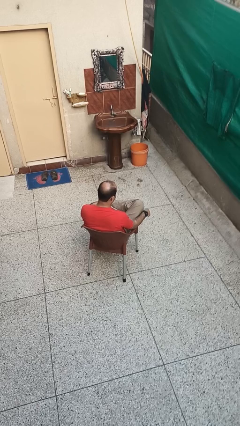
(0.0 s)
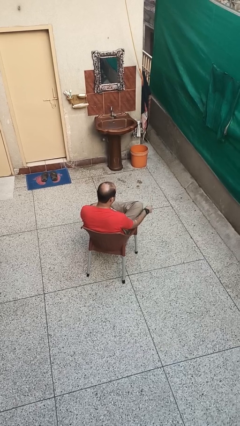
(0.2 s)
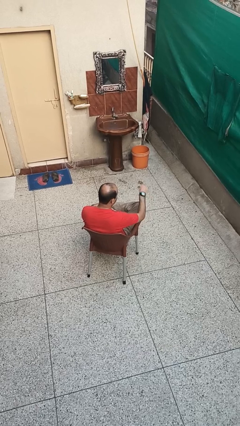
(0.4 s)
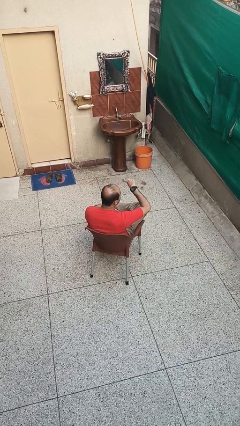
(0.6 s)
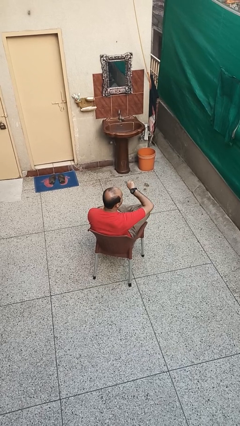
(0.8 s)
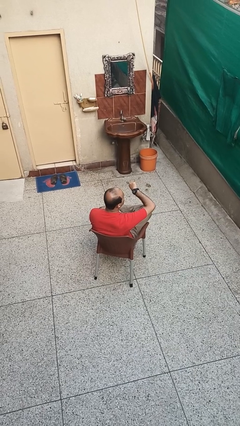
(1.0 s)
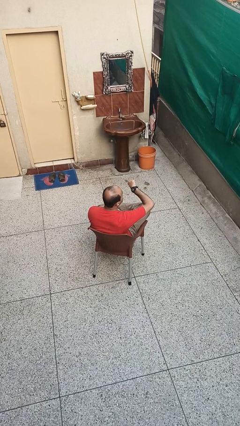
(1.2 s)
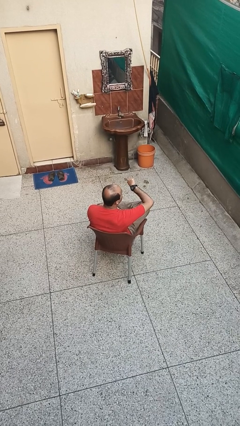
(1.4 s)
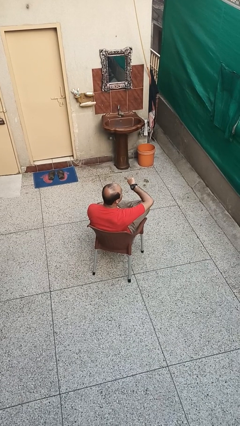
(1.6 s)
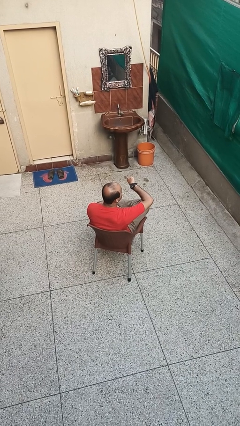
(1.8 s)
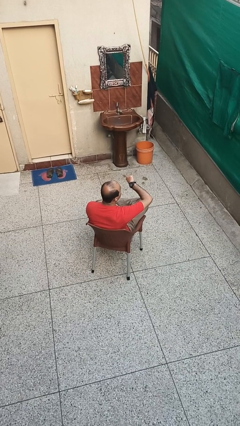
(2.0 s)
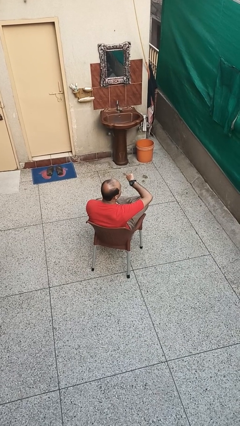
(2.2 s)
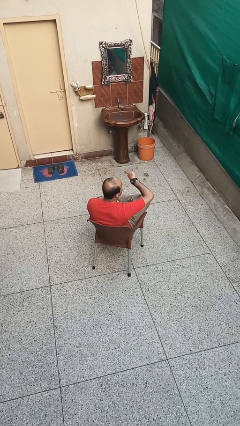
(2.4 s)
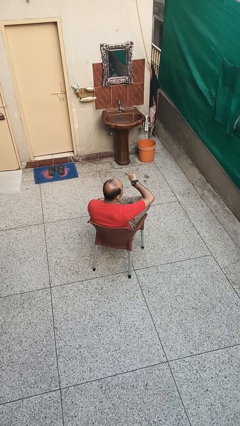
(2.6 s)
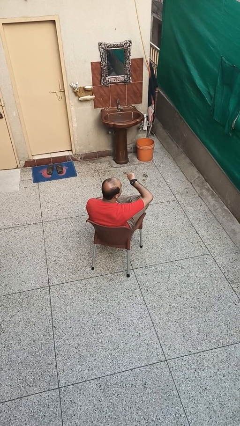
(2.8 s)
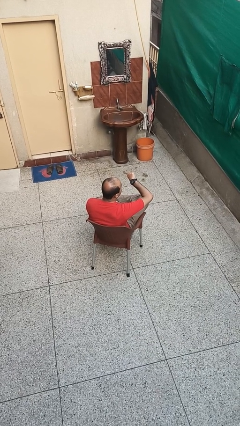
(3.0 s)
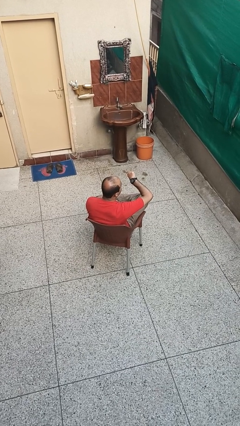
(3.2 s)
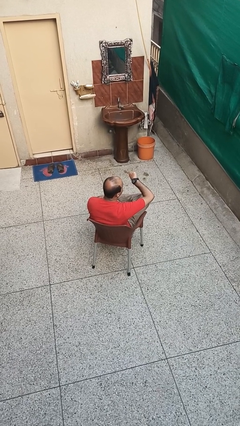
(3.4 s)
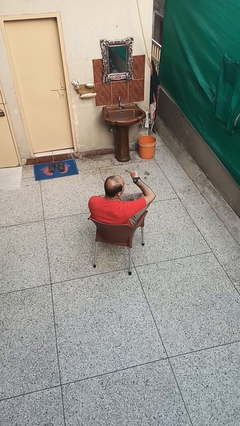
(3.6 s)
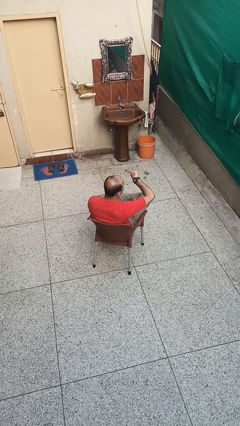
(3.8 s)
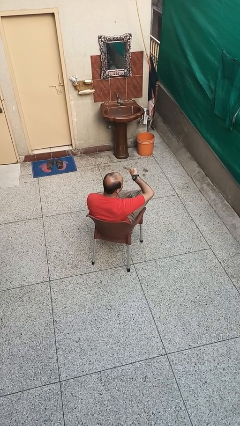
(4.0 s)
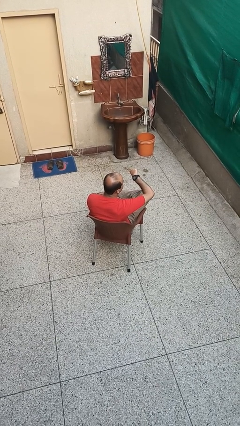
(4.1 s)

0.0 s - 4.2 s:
person looks at wristwatch

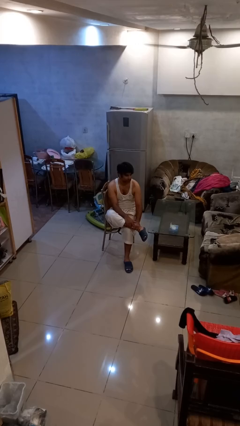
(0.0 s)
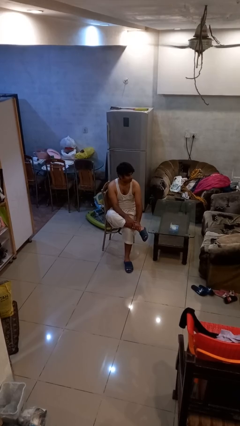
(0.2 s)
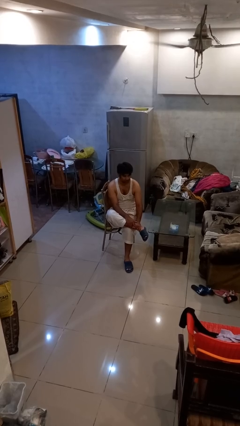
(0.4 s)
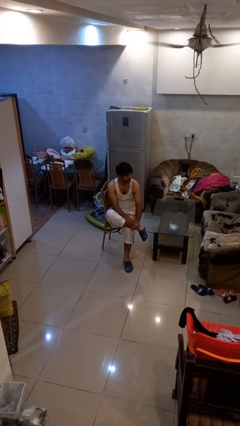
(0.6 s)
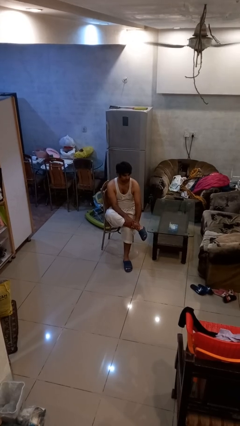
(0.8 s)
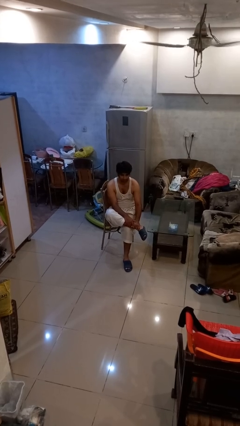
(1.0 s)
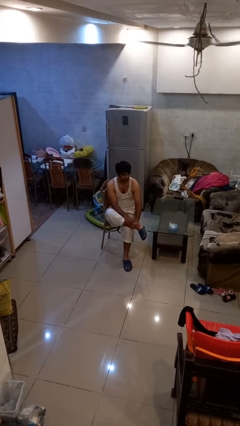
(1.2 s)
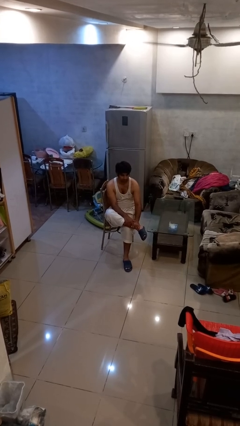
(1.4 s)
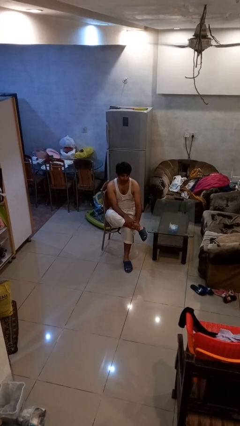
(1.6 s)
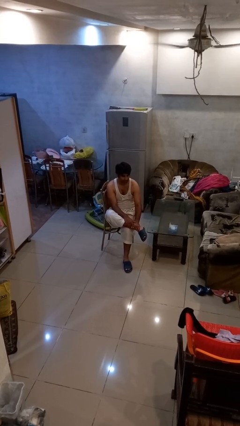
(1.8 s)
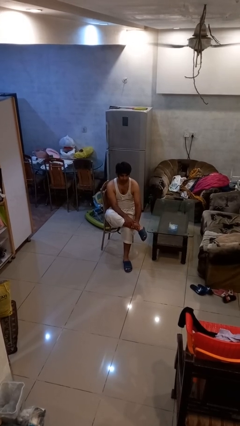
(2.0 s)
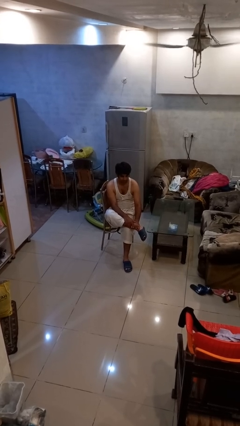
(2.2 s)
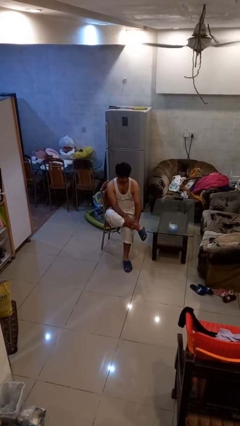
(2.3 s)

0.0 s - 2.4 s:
person shakes head

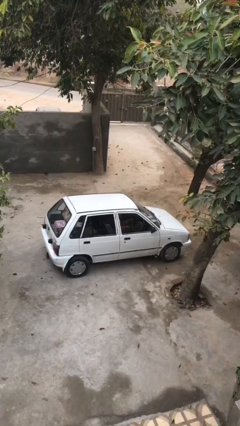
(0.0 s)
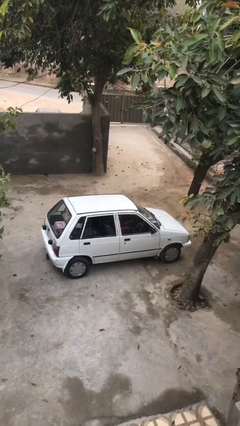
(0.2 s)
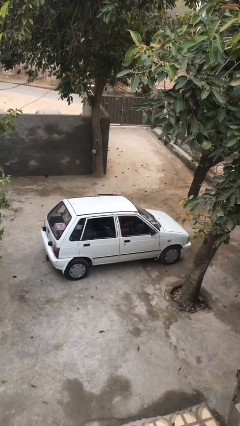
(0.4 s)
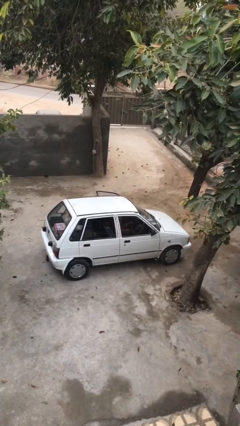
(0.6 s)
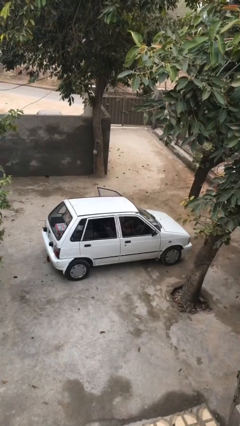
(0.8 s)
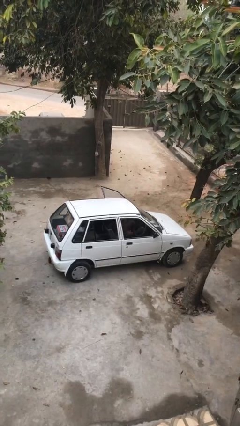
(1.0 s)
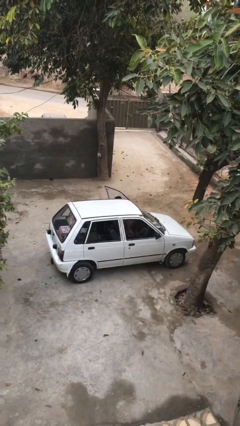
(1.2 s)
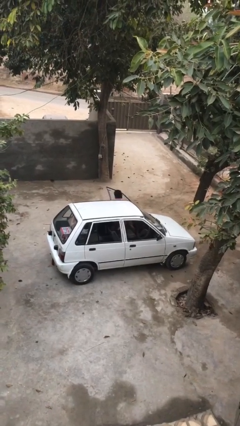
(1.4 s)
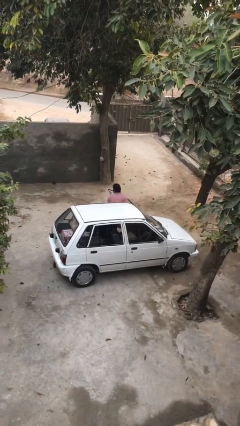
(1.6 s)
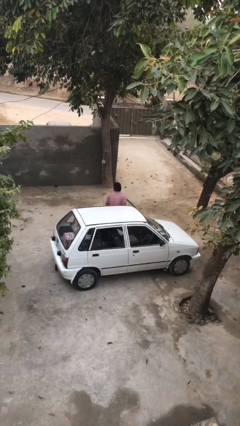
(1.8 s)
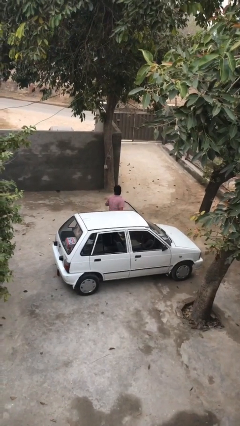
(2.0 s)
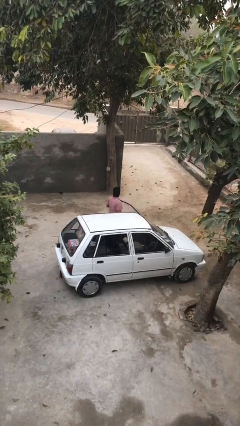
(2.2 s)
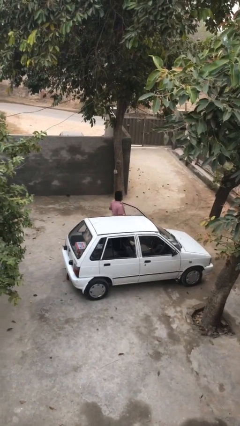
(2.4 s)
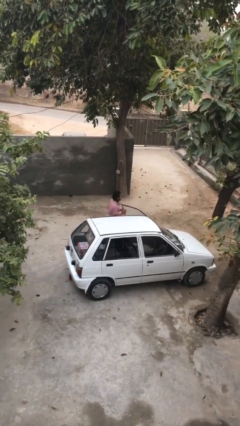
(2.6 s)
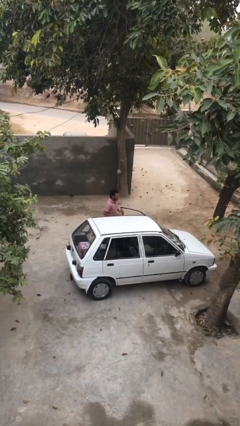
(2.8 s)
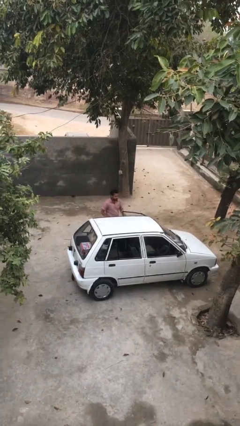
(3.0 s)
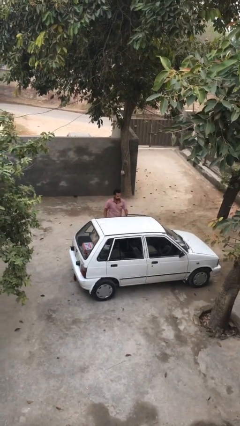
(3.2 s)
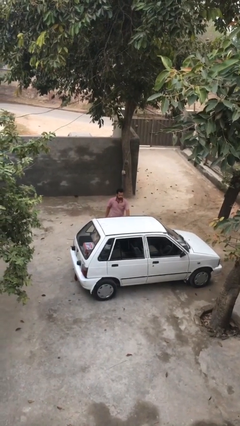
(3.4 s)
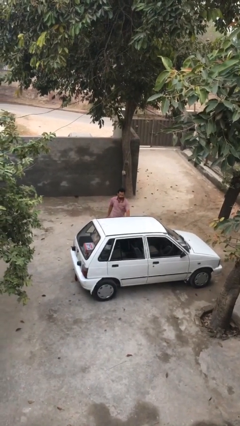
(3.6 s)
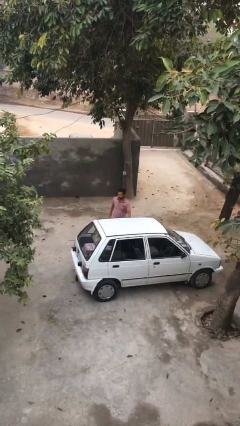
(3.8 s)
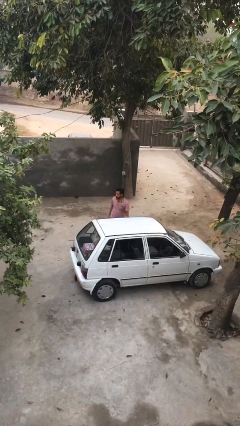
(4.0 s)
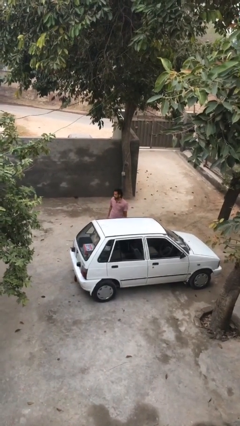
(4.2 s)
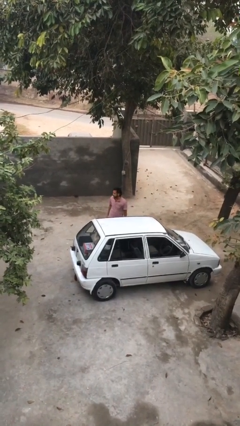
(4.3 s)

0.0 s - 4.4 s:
person exits car

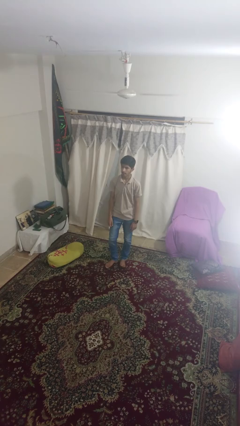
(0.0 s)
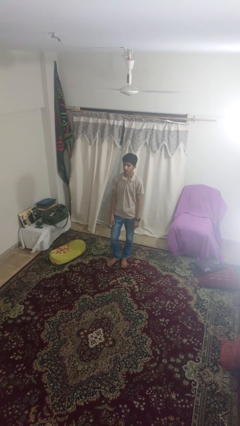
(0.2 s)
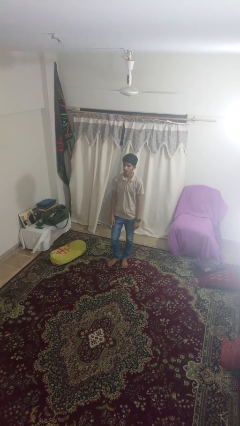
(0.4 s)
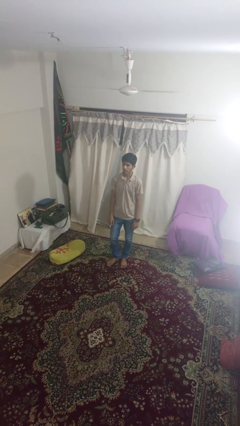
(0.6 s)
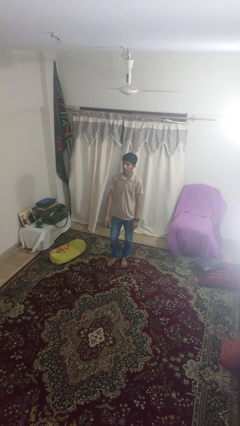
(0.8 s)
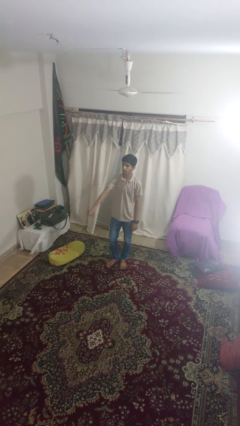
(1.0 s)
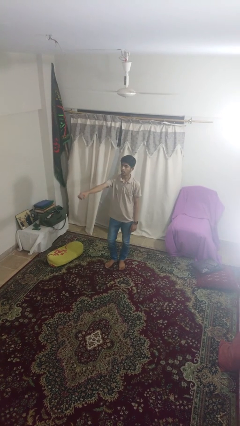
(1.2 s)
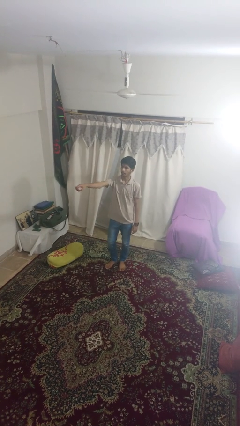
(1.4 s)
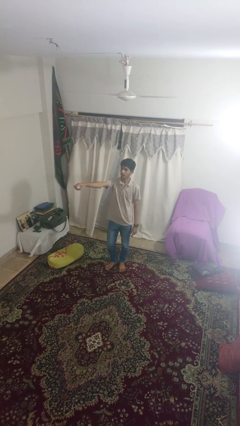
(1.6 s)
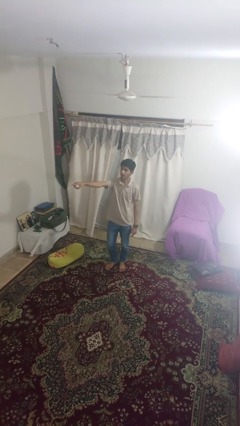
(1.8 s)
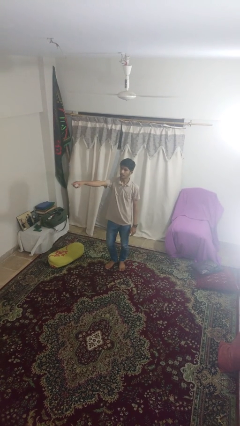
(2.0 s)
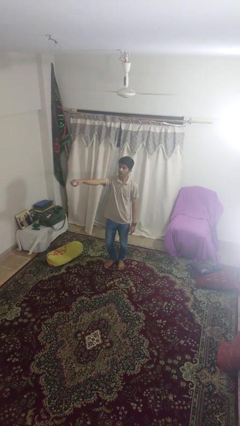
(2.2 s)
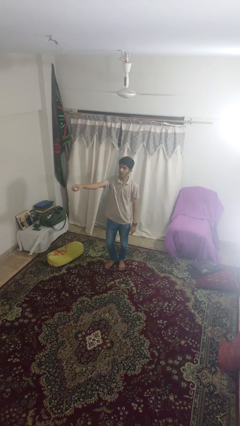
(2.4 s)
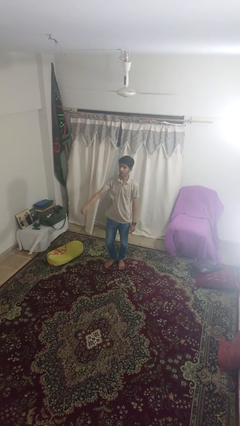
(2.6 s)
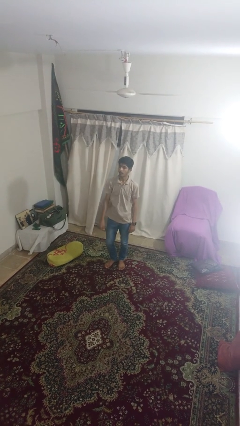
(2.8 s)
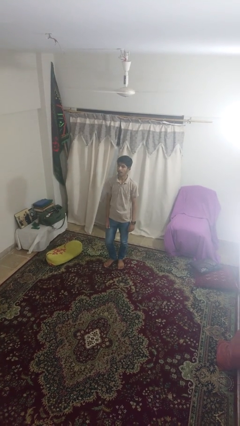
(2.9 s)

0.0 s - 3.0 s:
person points at person

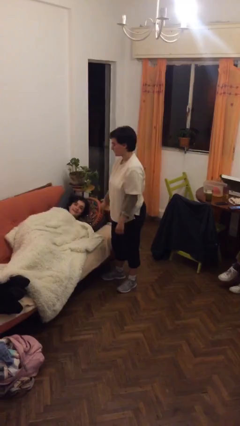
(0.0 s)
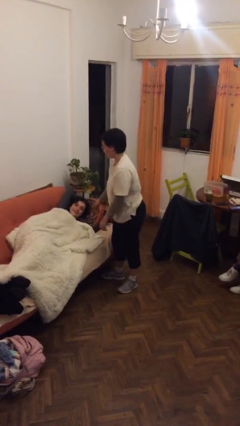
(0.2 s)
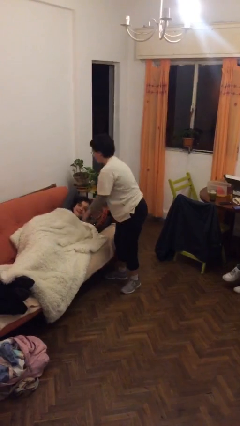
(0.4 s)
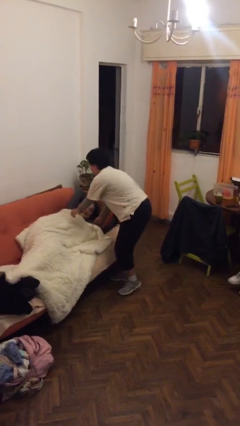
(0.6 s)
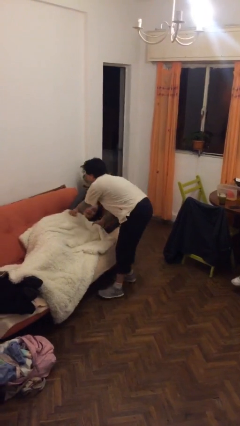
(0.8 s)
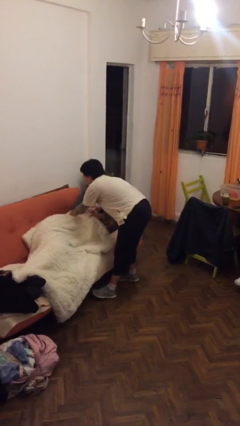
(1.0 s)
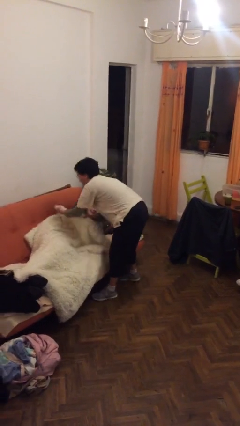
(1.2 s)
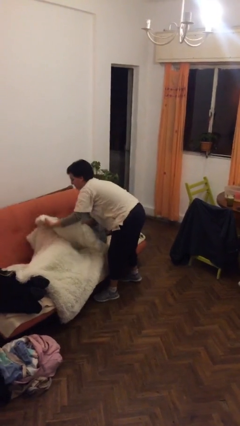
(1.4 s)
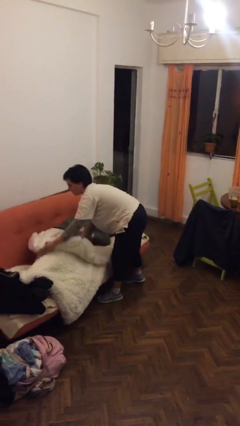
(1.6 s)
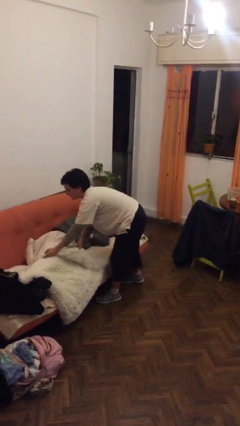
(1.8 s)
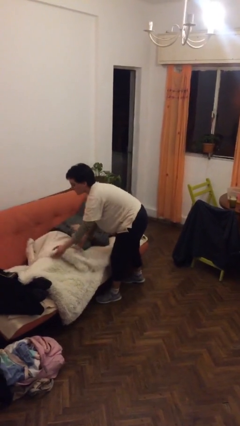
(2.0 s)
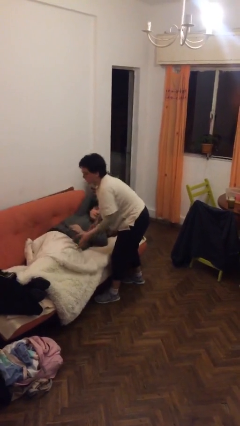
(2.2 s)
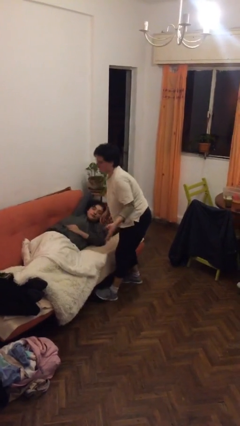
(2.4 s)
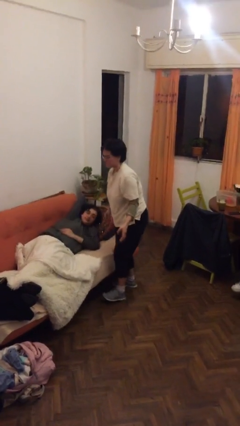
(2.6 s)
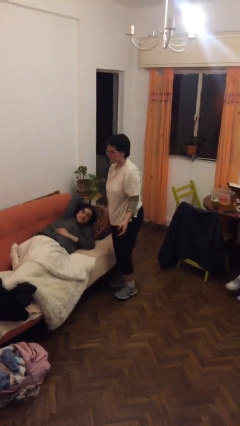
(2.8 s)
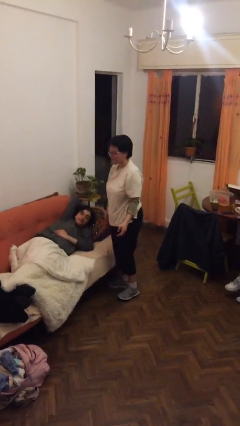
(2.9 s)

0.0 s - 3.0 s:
person uncovers friend with blanket

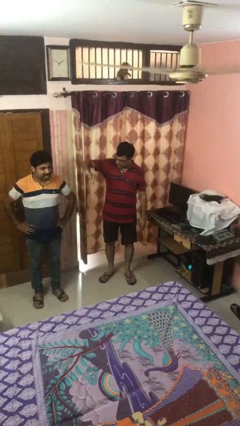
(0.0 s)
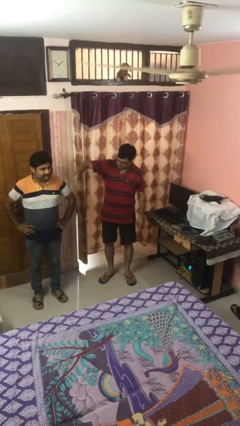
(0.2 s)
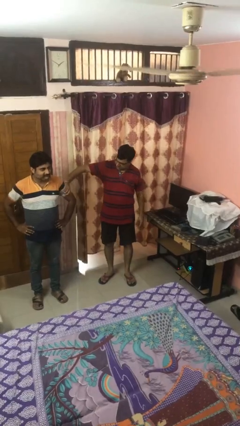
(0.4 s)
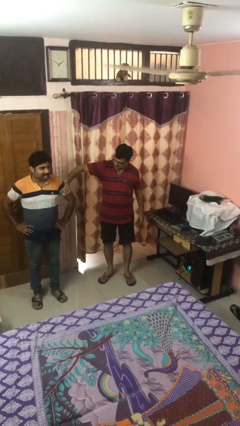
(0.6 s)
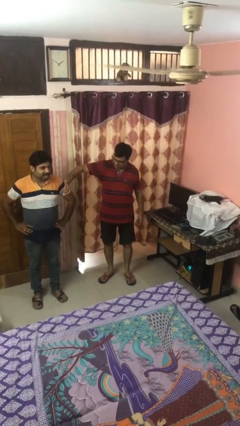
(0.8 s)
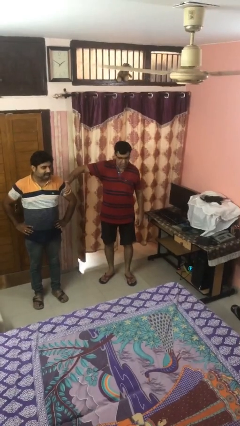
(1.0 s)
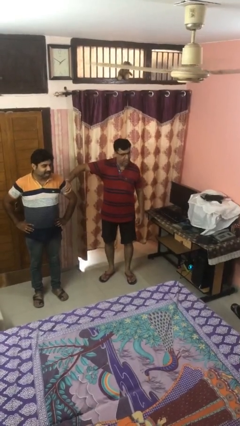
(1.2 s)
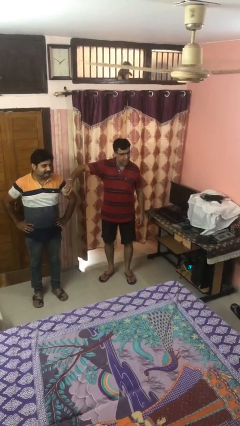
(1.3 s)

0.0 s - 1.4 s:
person grabs person by bicep
